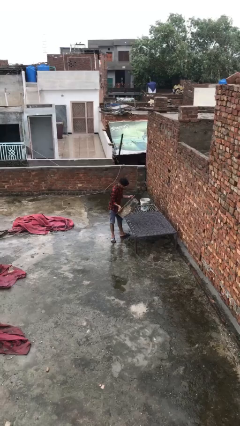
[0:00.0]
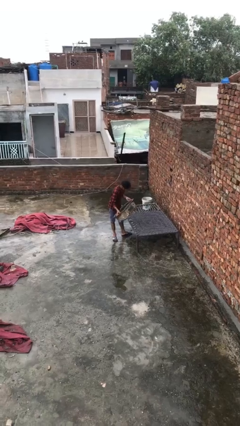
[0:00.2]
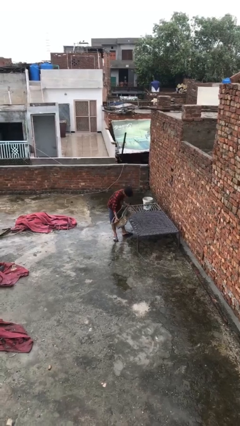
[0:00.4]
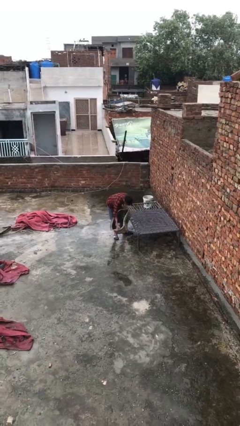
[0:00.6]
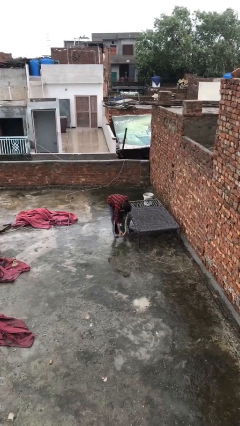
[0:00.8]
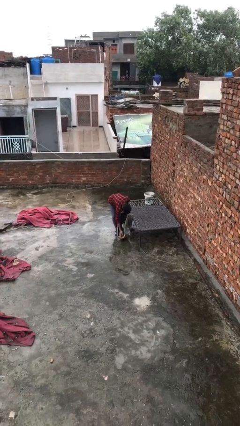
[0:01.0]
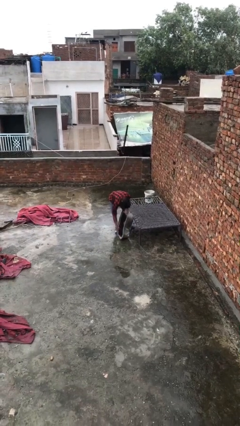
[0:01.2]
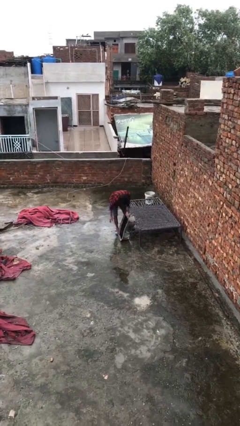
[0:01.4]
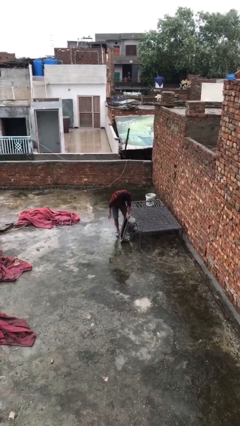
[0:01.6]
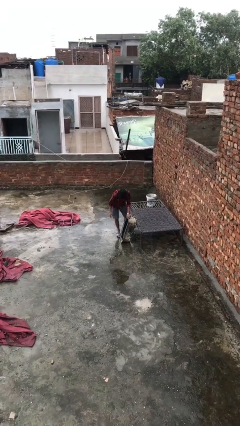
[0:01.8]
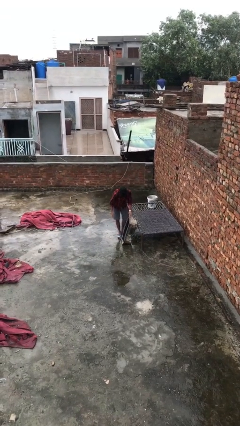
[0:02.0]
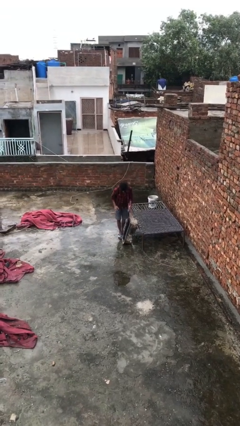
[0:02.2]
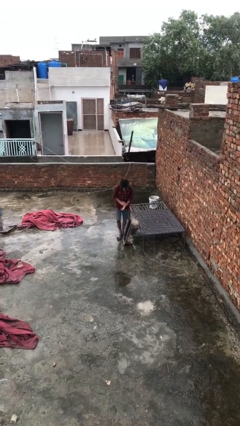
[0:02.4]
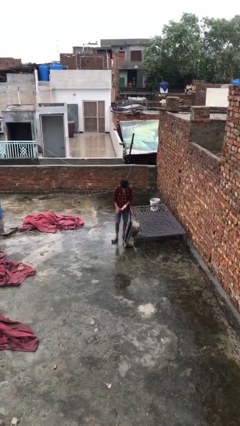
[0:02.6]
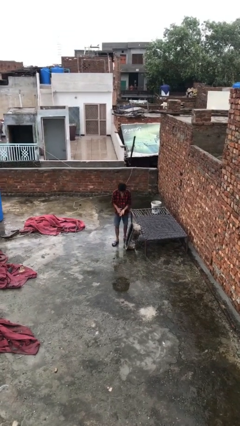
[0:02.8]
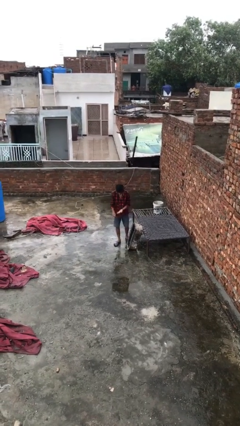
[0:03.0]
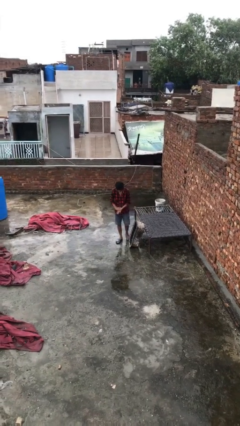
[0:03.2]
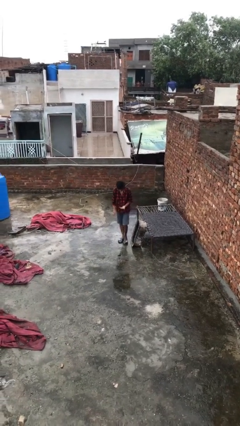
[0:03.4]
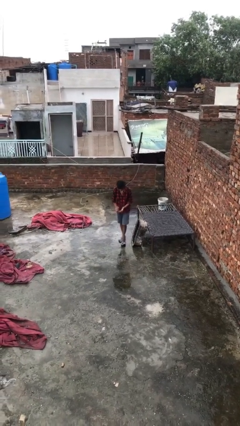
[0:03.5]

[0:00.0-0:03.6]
person puts down object on floor

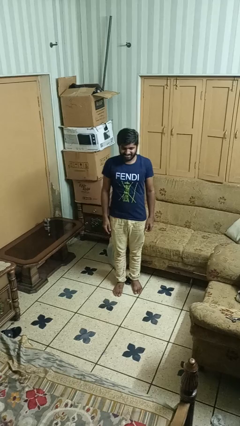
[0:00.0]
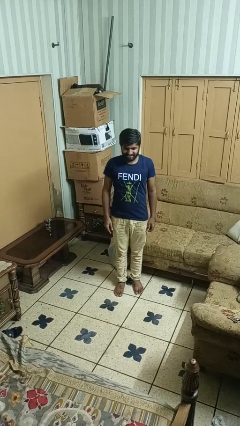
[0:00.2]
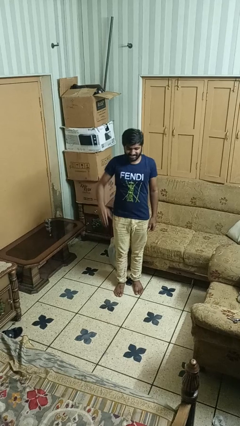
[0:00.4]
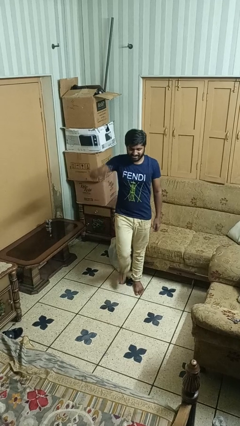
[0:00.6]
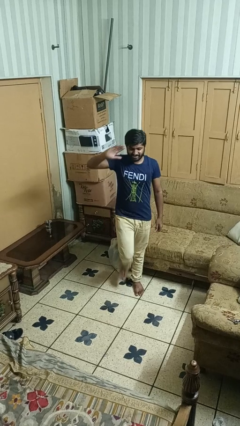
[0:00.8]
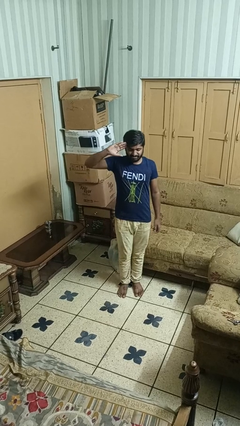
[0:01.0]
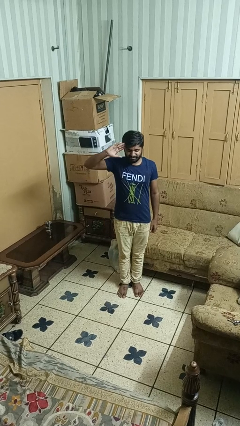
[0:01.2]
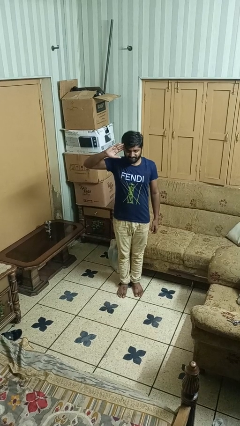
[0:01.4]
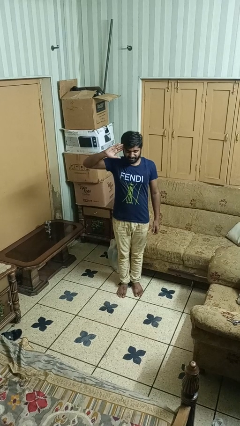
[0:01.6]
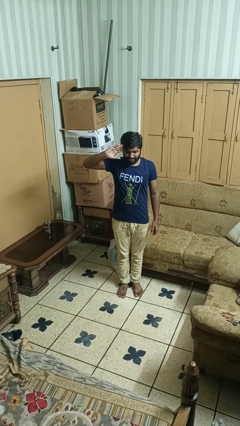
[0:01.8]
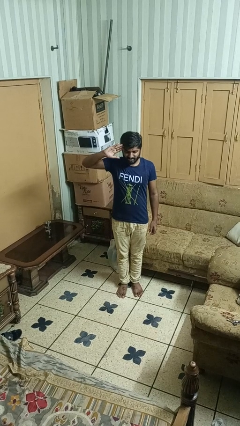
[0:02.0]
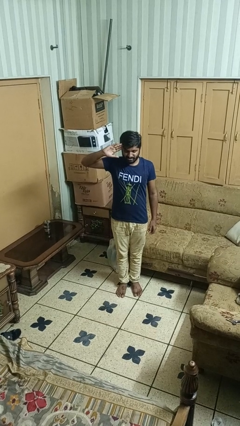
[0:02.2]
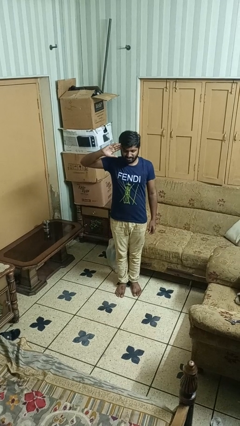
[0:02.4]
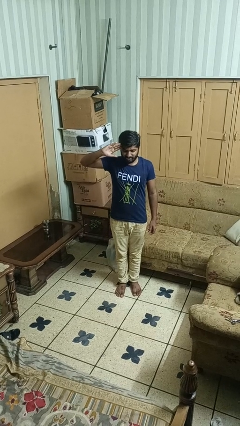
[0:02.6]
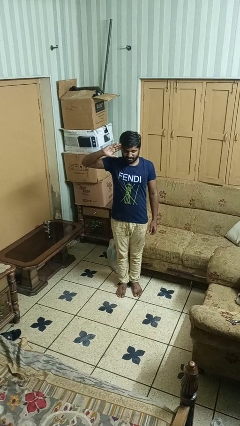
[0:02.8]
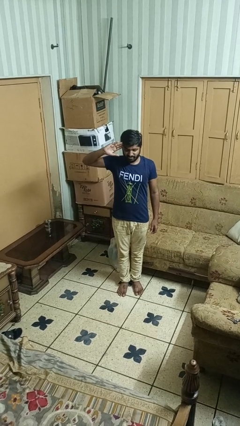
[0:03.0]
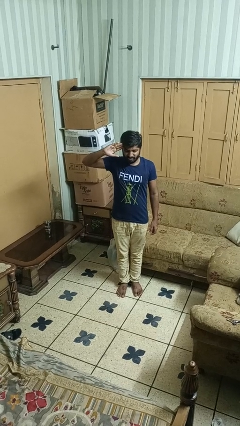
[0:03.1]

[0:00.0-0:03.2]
person salutes

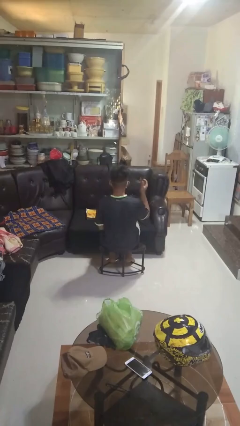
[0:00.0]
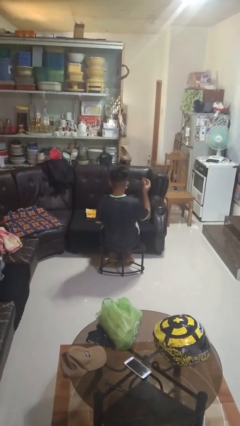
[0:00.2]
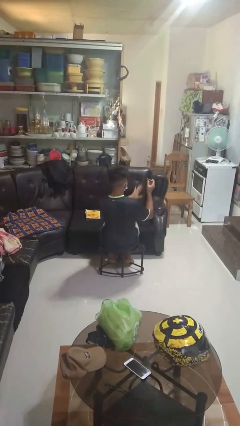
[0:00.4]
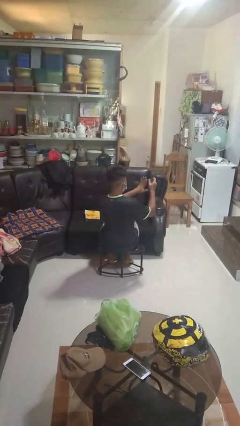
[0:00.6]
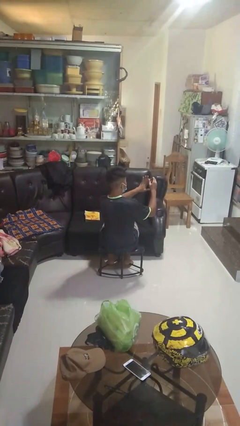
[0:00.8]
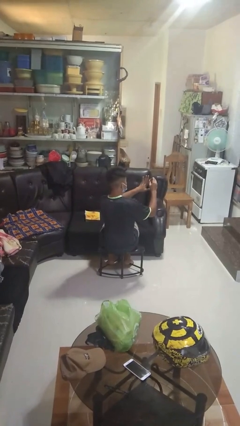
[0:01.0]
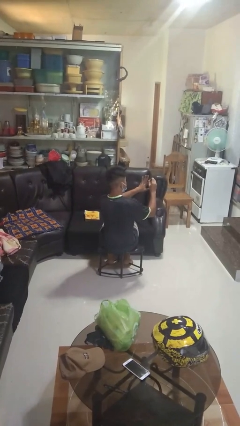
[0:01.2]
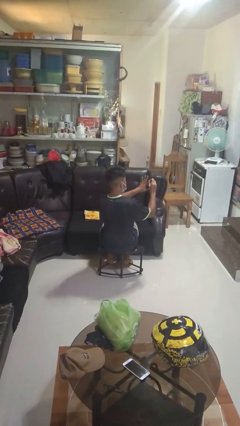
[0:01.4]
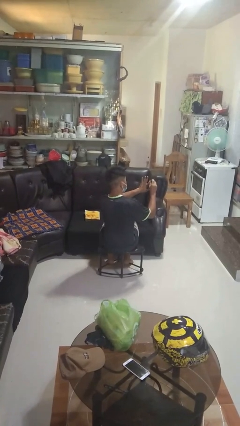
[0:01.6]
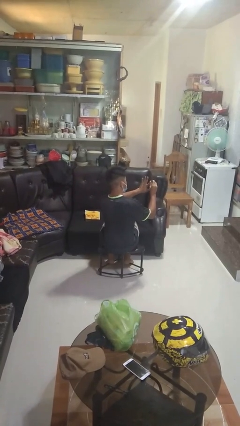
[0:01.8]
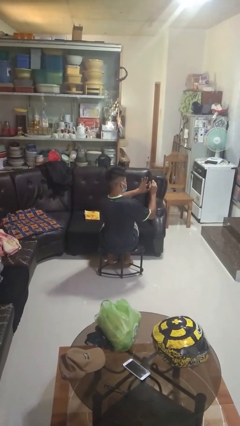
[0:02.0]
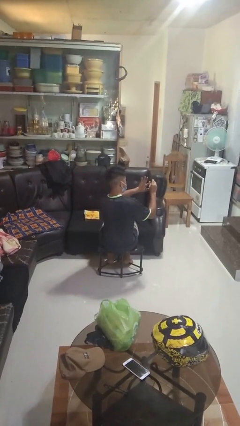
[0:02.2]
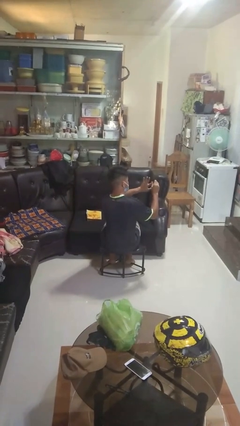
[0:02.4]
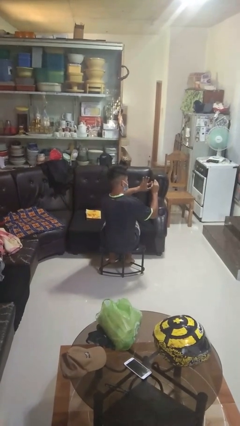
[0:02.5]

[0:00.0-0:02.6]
person clips fingernails

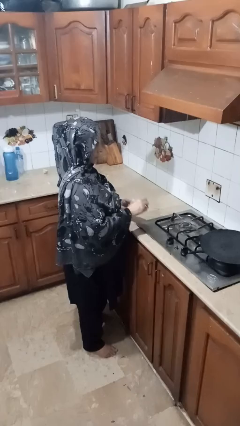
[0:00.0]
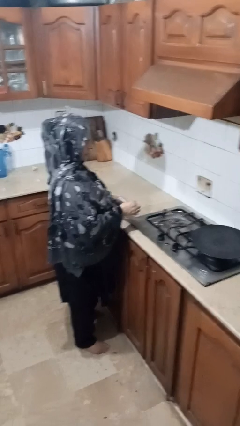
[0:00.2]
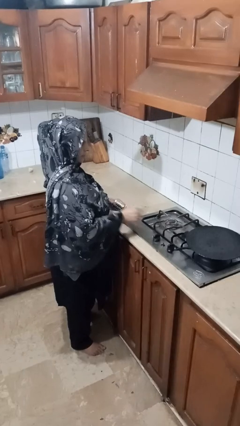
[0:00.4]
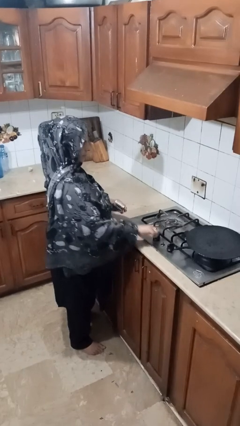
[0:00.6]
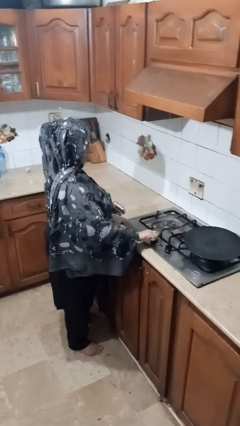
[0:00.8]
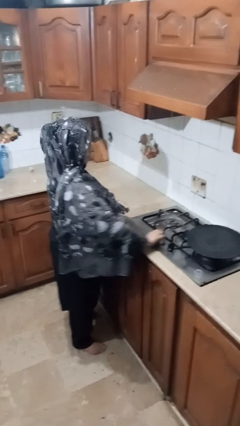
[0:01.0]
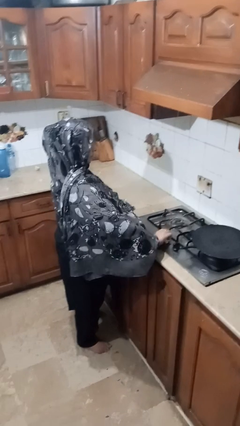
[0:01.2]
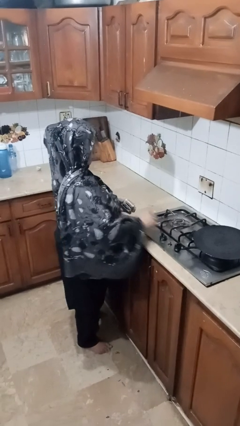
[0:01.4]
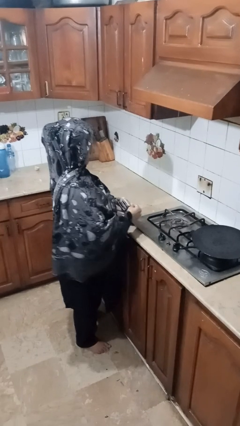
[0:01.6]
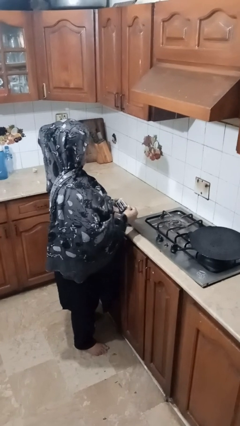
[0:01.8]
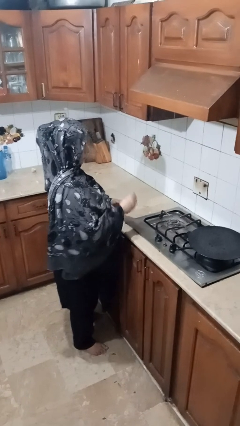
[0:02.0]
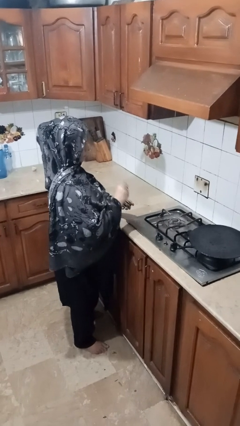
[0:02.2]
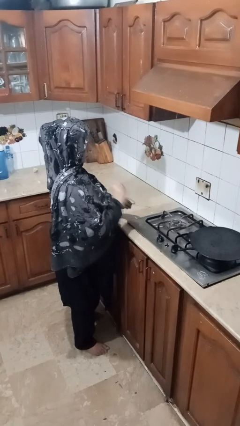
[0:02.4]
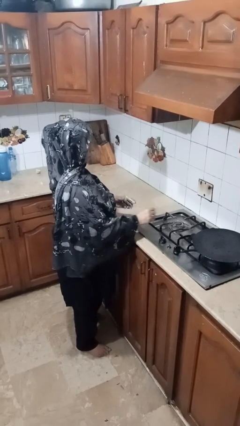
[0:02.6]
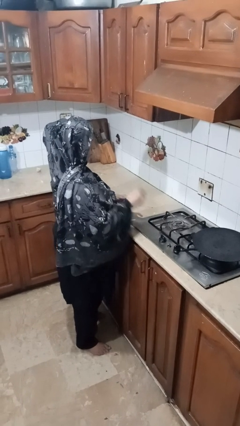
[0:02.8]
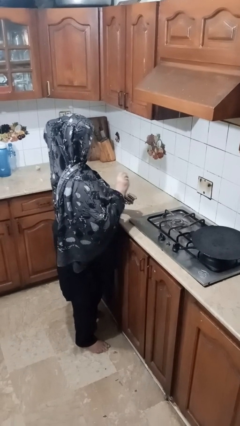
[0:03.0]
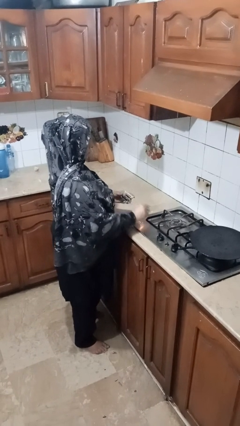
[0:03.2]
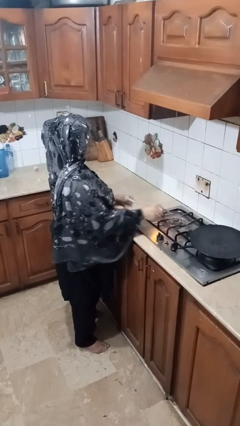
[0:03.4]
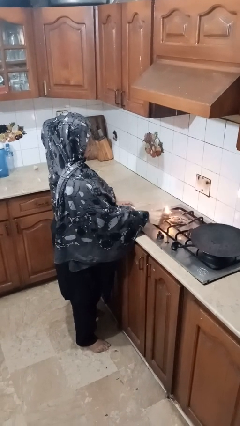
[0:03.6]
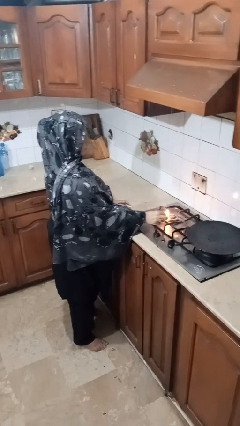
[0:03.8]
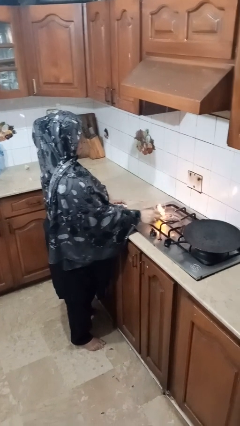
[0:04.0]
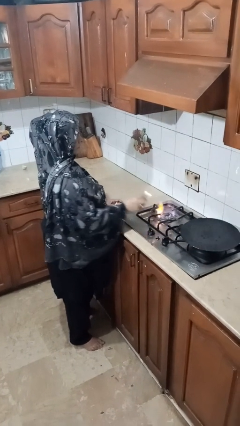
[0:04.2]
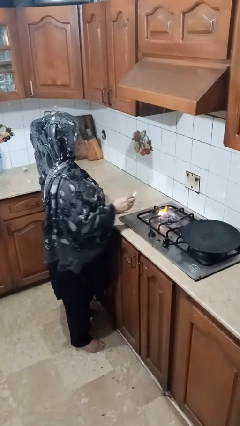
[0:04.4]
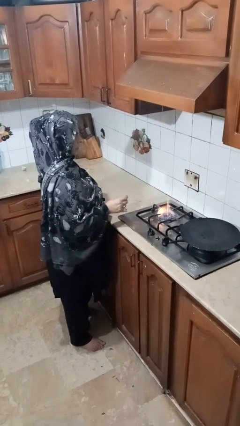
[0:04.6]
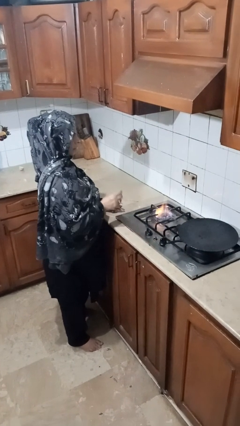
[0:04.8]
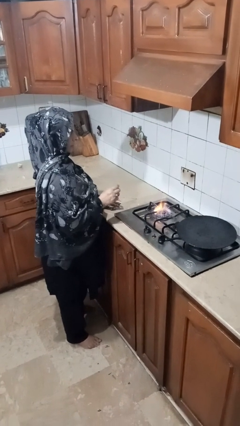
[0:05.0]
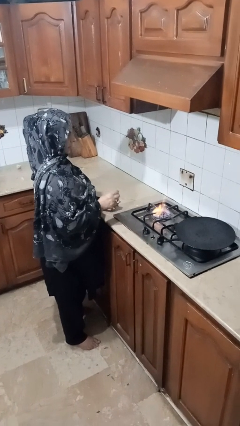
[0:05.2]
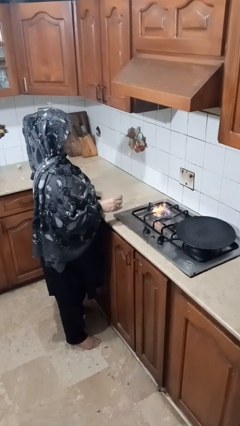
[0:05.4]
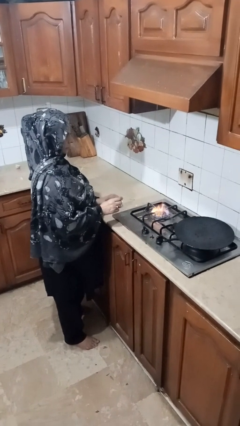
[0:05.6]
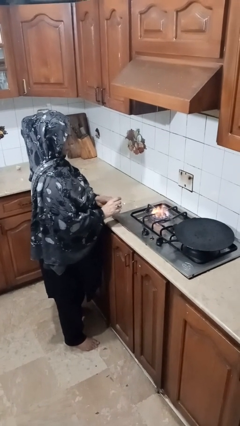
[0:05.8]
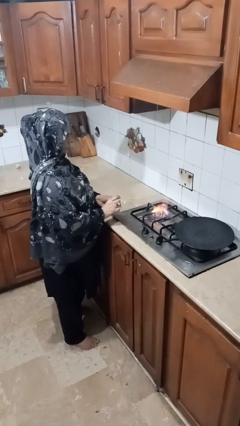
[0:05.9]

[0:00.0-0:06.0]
person turns on stovetop

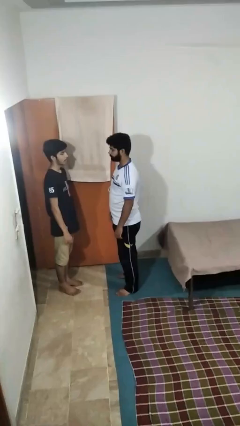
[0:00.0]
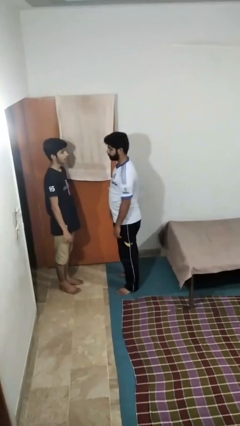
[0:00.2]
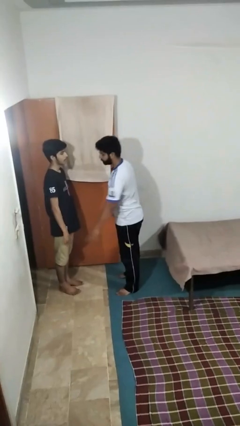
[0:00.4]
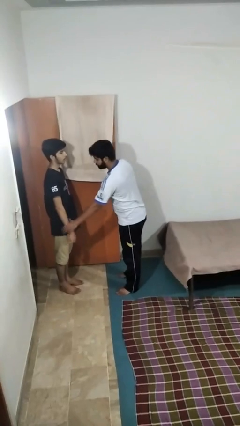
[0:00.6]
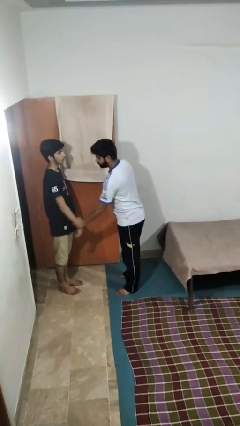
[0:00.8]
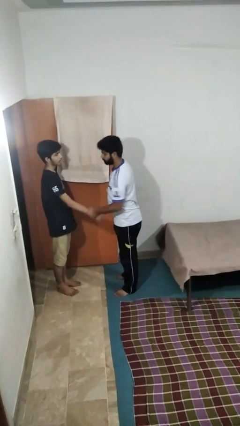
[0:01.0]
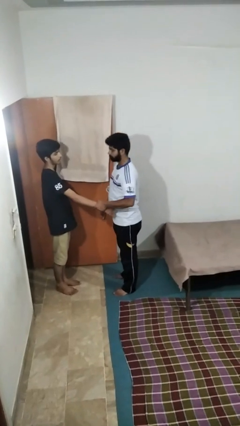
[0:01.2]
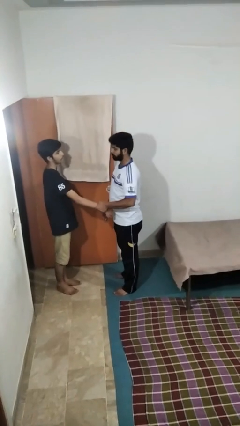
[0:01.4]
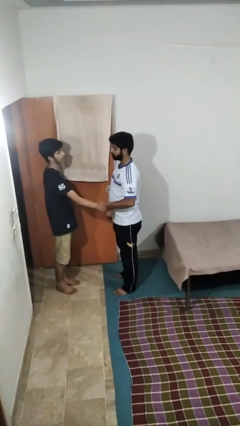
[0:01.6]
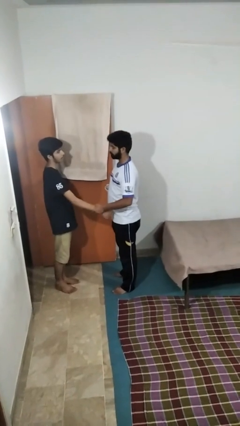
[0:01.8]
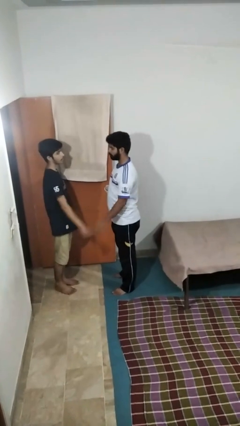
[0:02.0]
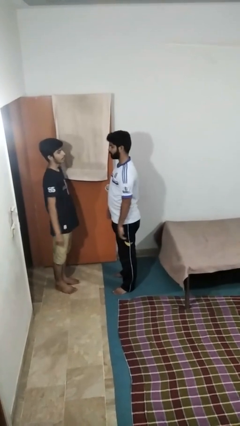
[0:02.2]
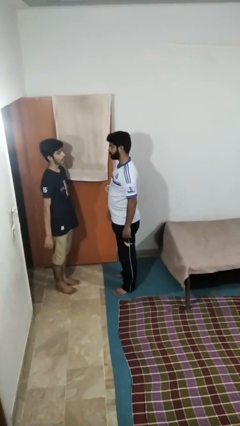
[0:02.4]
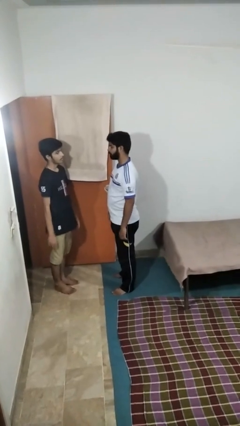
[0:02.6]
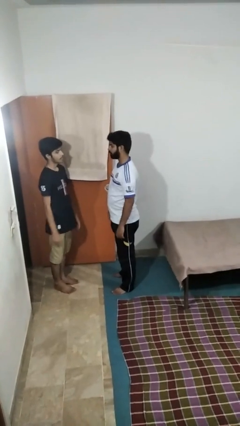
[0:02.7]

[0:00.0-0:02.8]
person grabs person by forearm
